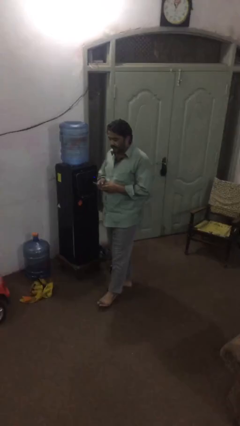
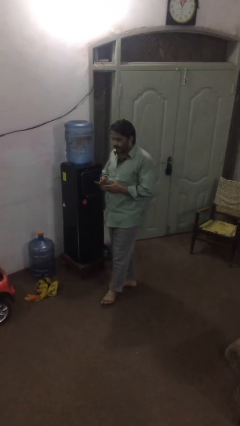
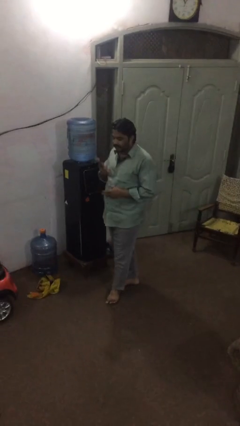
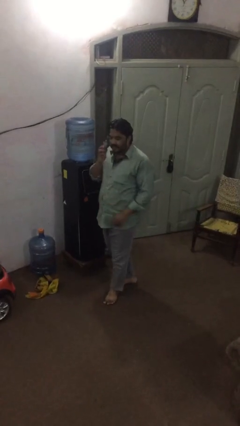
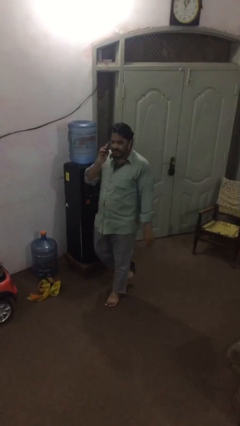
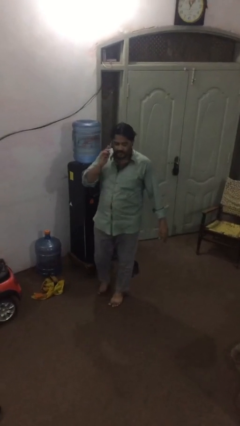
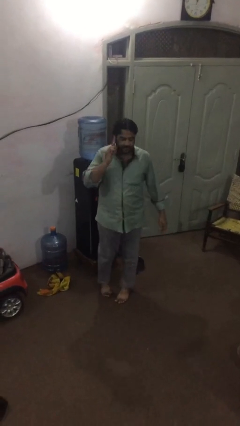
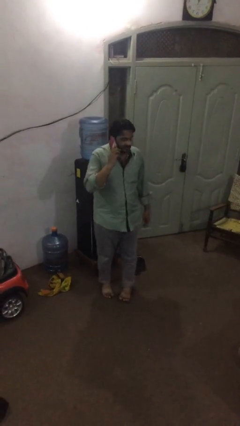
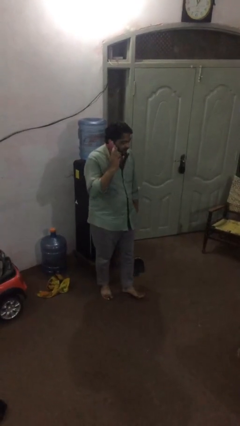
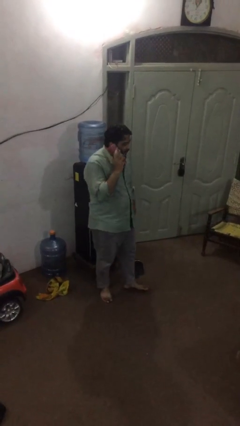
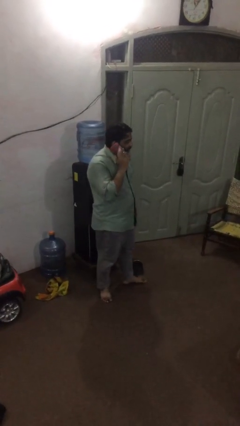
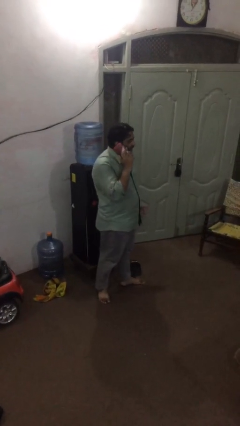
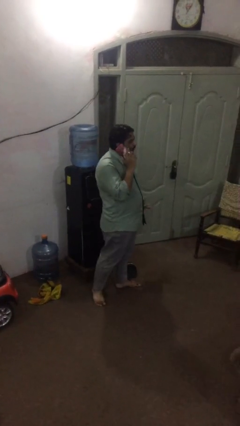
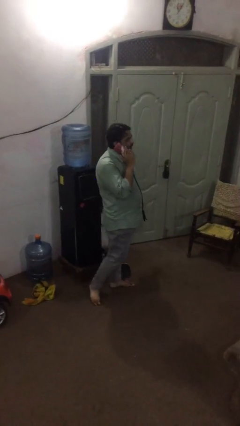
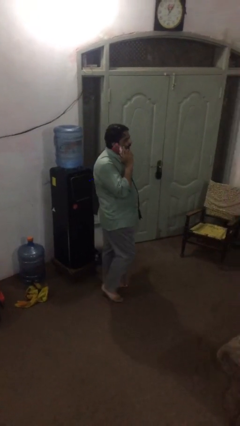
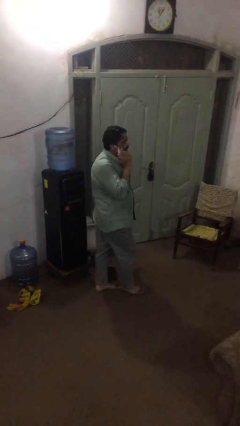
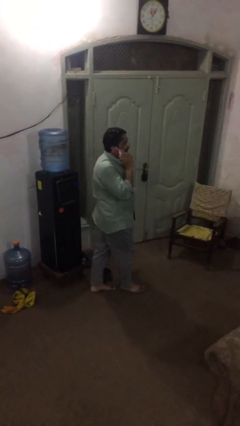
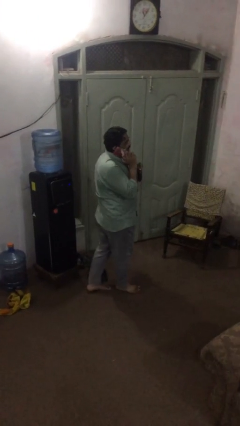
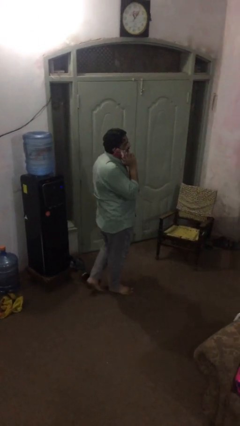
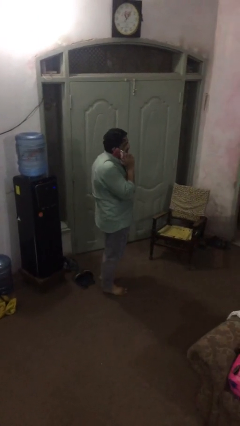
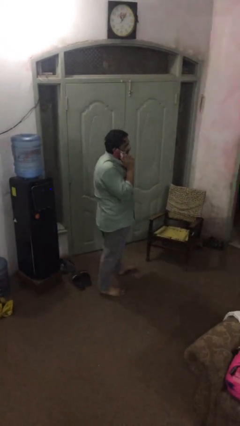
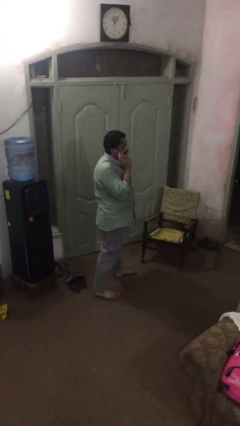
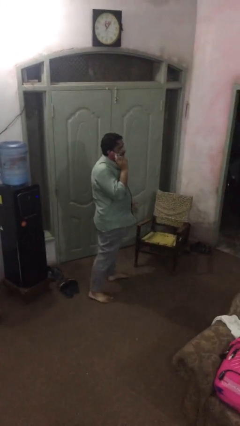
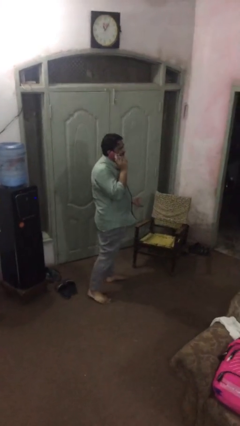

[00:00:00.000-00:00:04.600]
person talks on phone

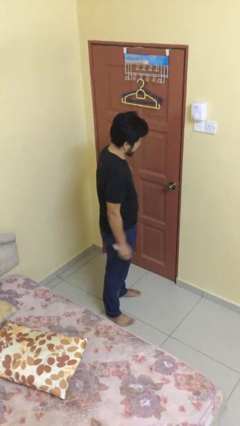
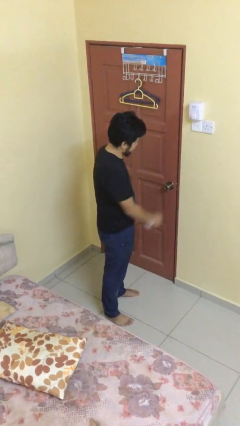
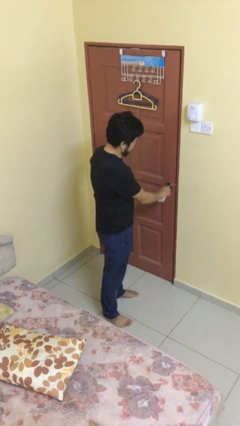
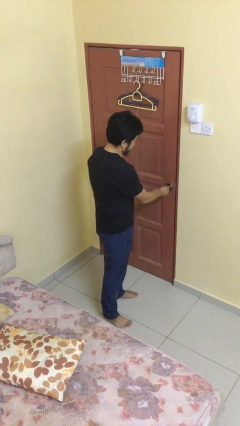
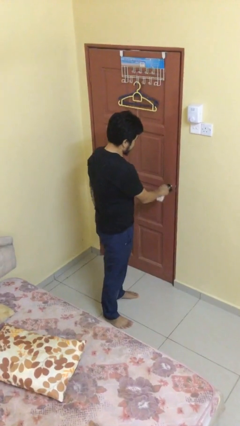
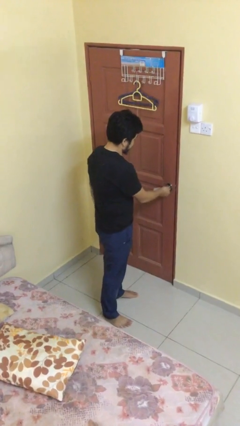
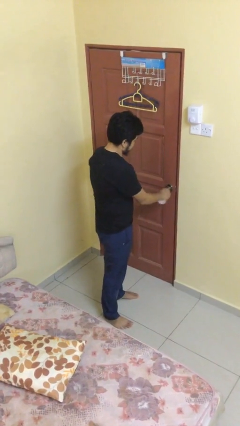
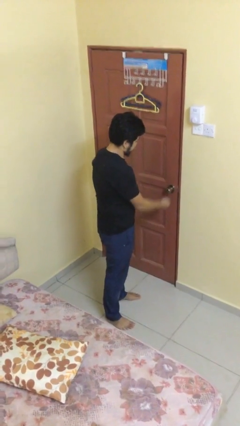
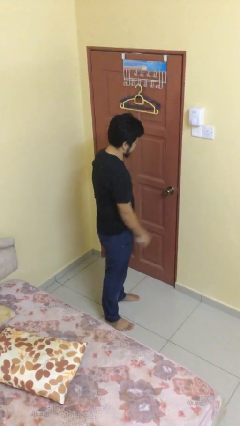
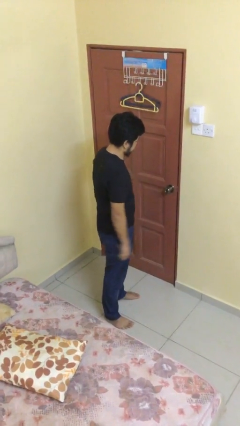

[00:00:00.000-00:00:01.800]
person unlocks door with keys

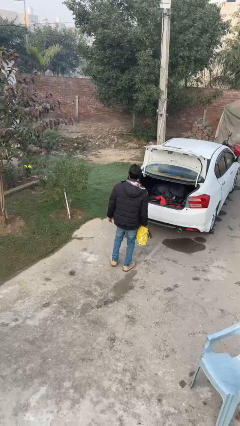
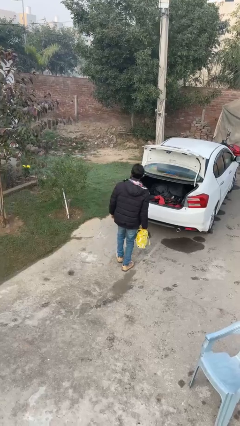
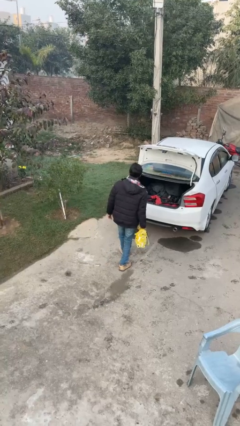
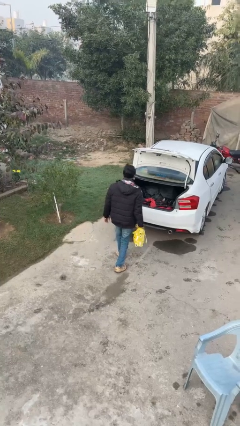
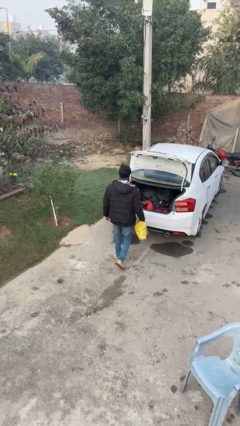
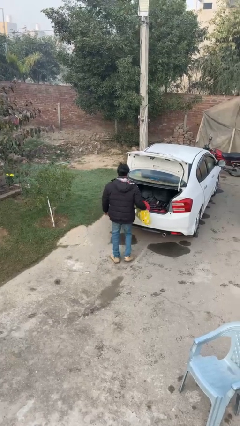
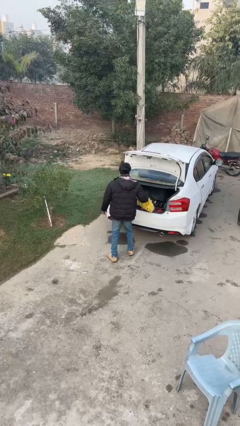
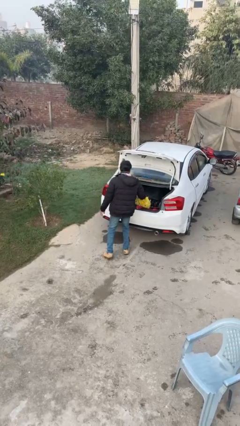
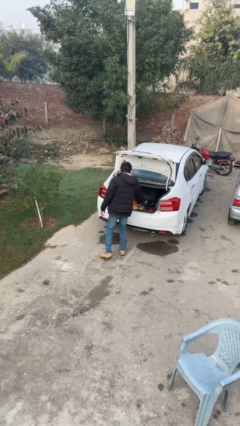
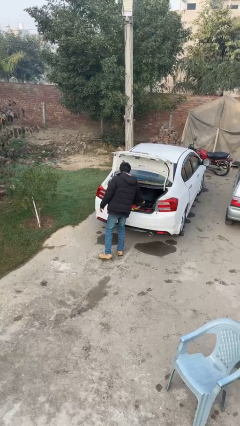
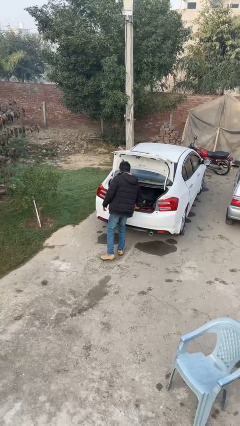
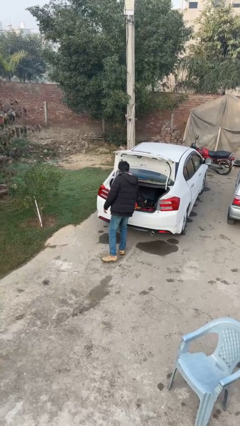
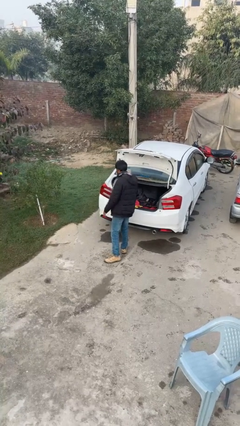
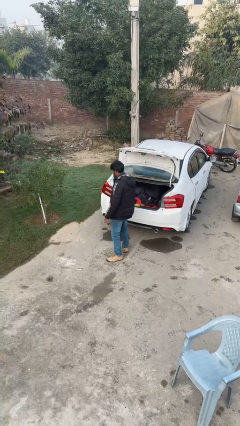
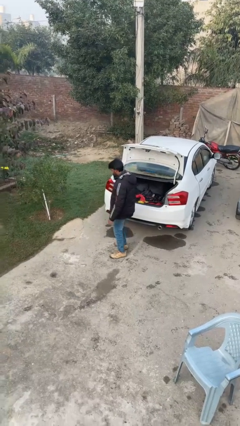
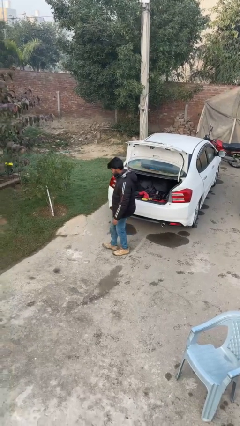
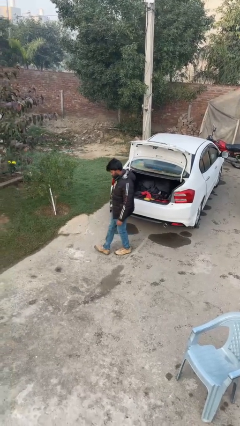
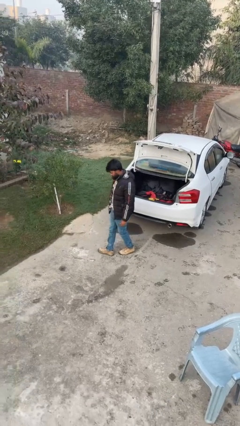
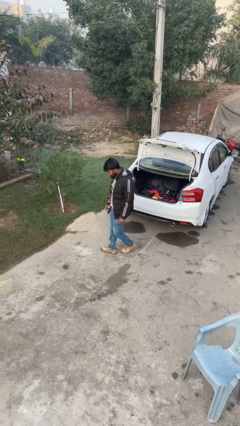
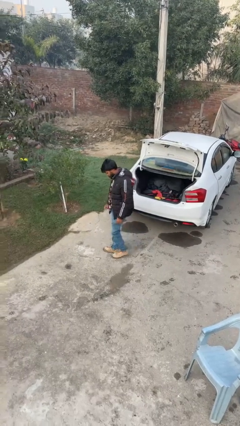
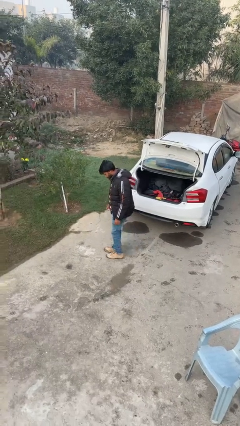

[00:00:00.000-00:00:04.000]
person loads car

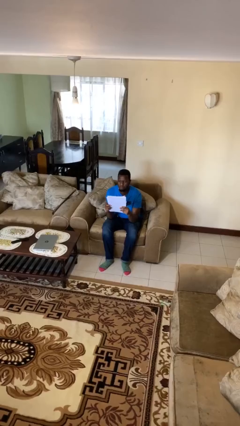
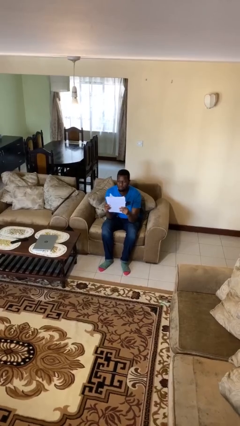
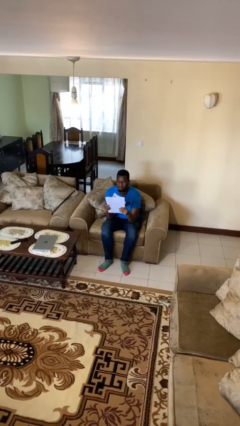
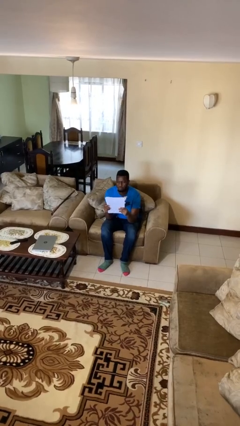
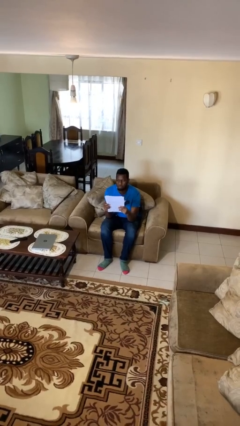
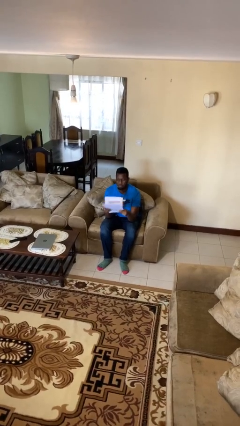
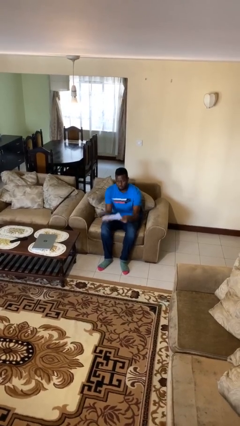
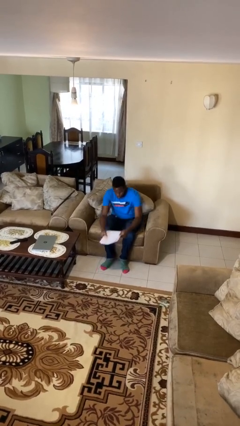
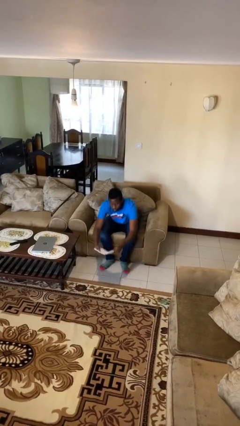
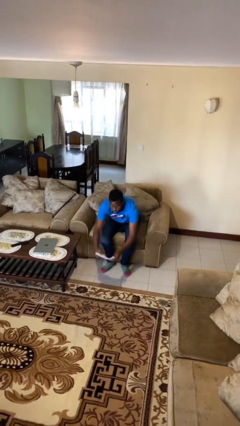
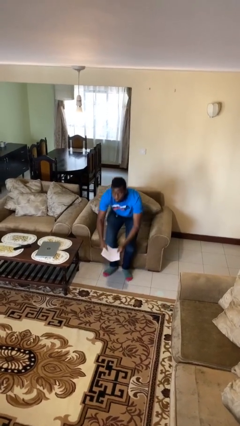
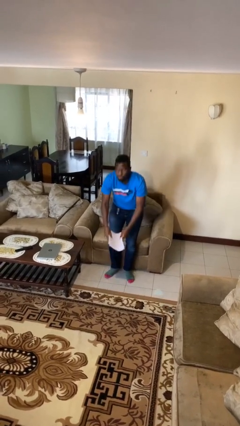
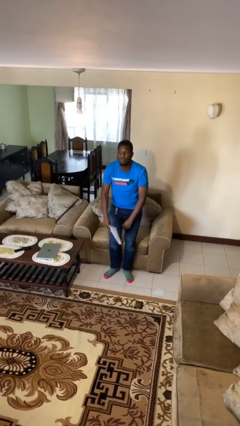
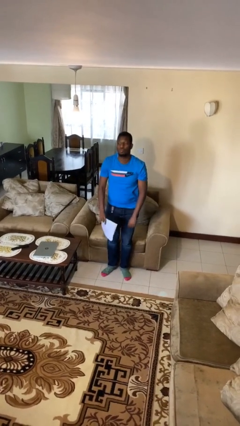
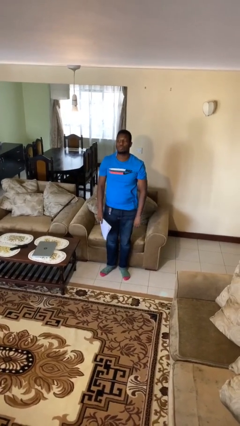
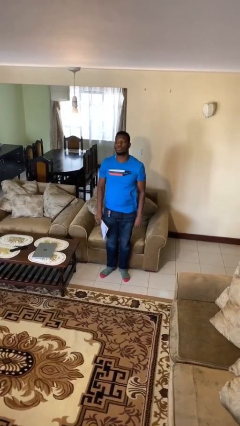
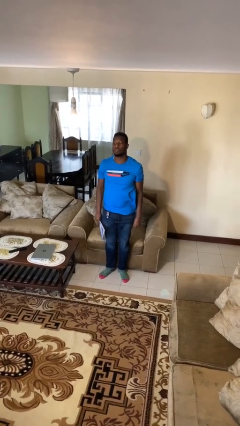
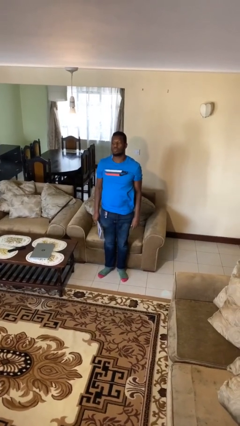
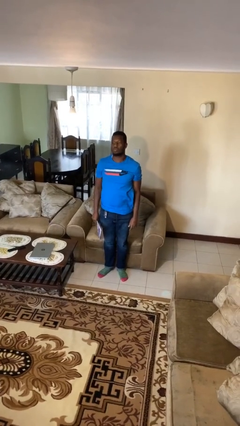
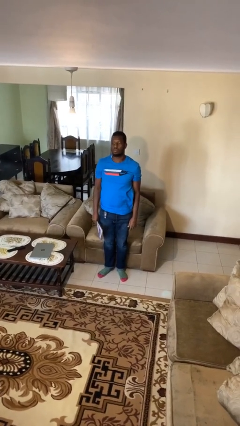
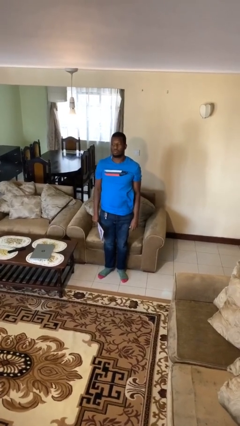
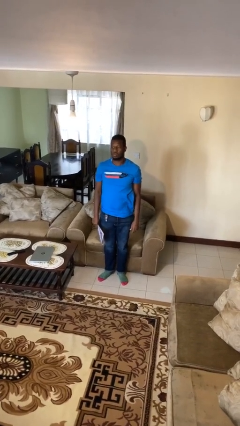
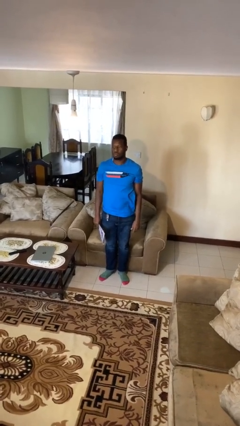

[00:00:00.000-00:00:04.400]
person stands up

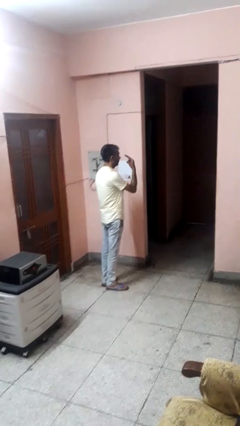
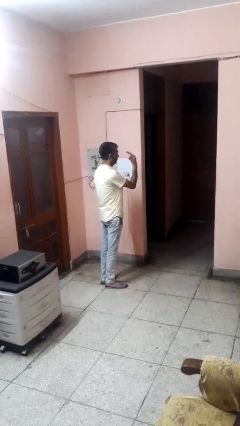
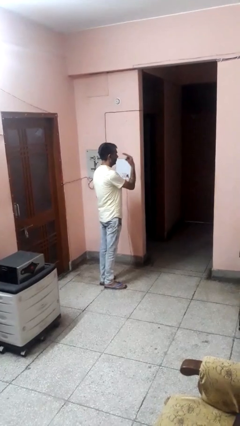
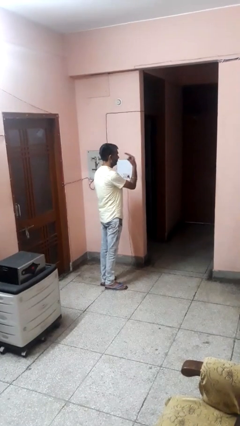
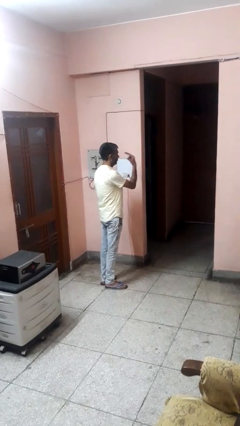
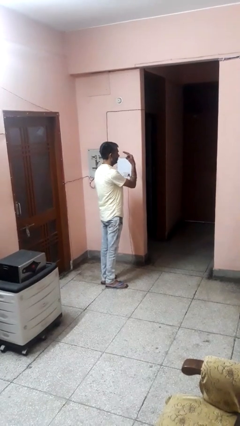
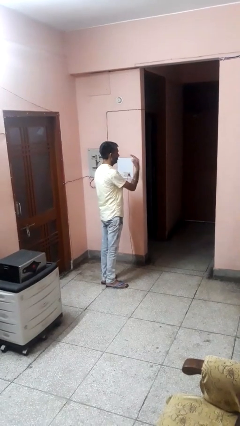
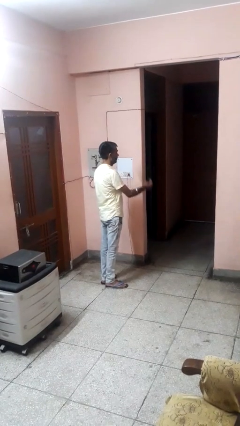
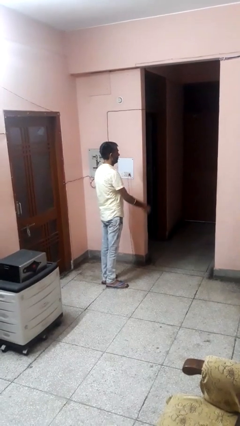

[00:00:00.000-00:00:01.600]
person gestures watch closely

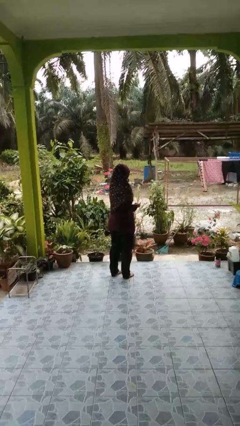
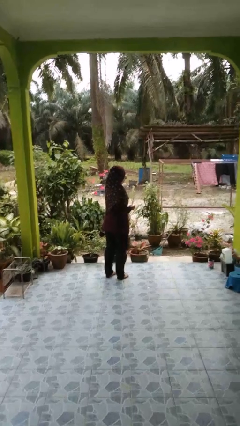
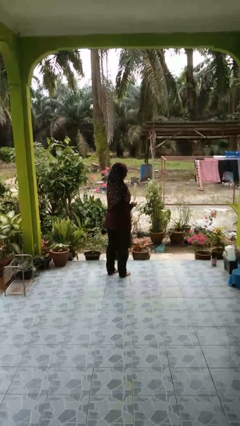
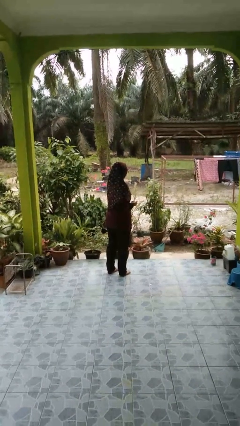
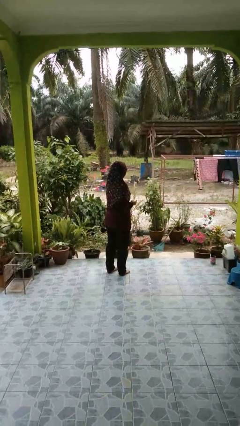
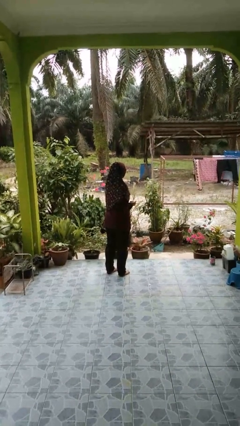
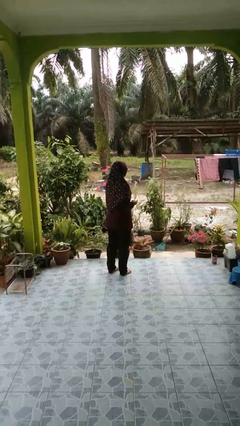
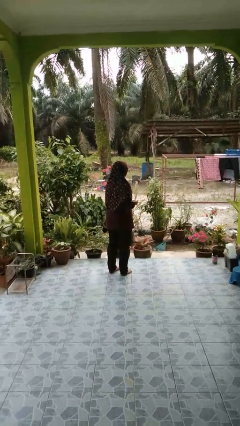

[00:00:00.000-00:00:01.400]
person punches
